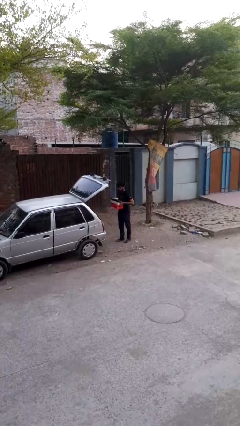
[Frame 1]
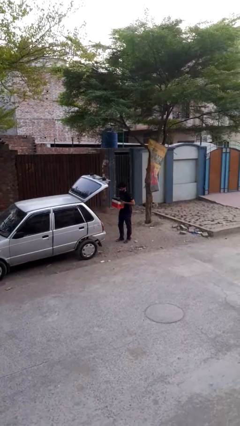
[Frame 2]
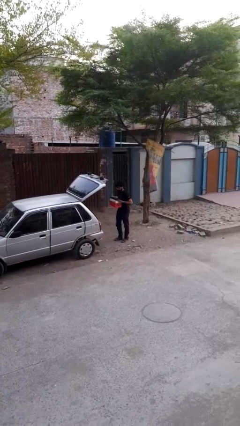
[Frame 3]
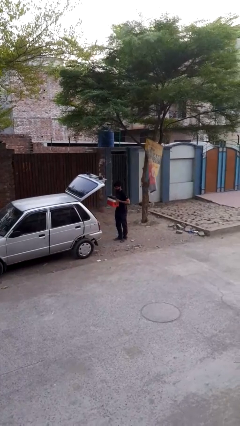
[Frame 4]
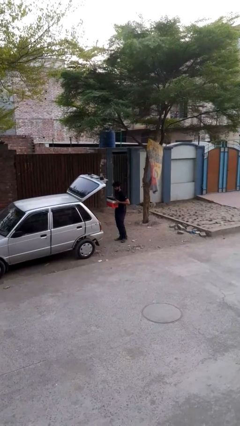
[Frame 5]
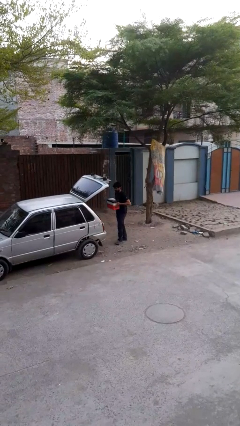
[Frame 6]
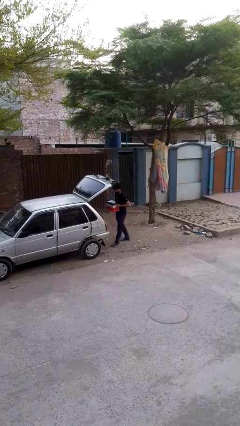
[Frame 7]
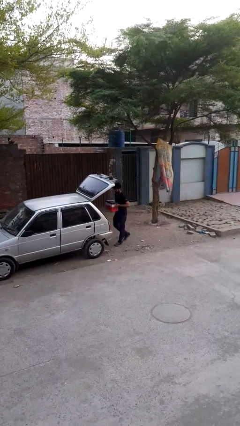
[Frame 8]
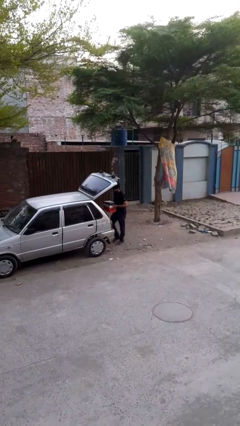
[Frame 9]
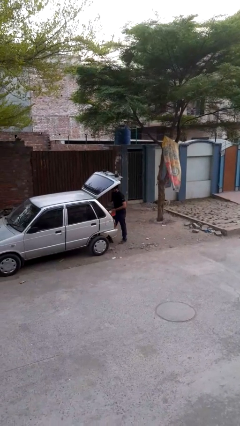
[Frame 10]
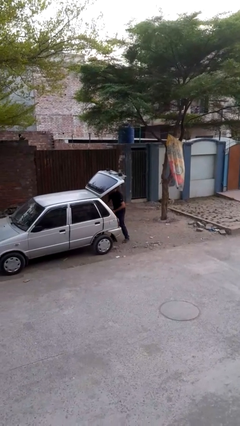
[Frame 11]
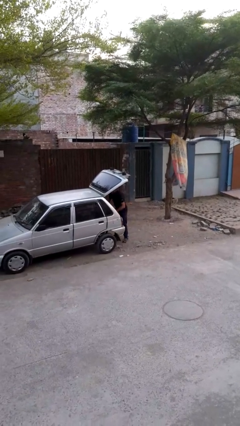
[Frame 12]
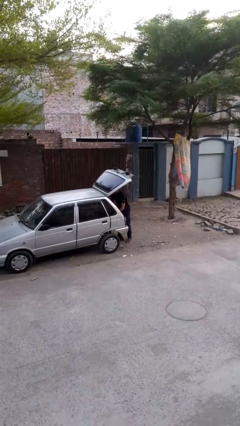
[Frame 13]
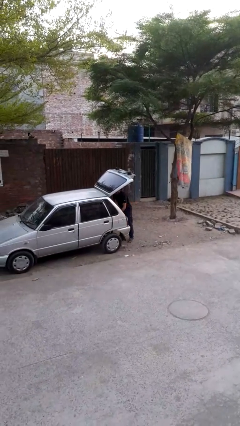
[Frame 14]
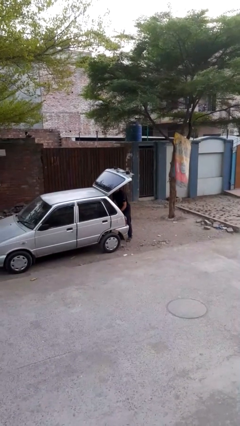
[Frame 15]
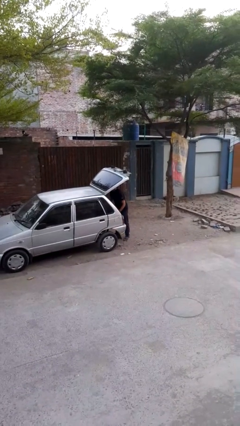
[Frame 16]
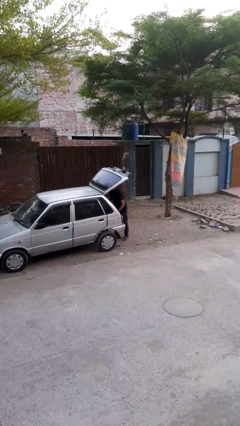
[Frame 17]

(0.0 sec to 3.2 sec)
person loads car

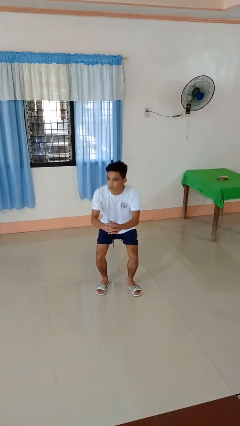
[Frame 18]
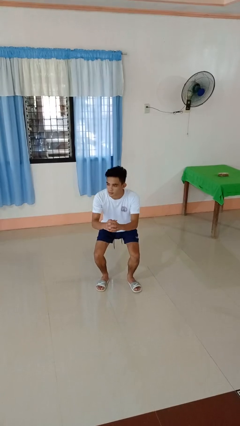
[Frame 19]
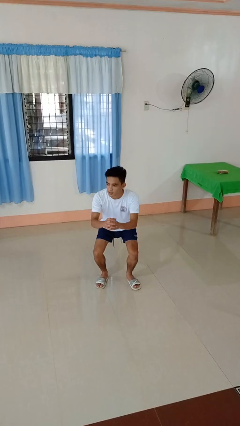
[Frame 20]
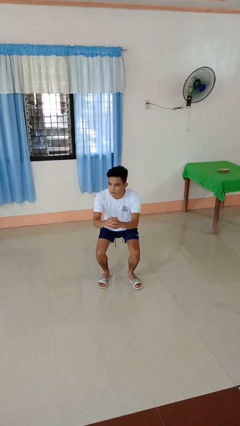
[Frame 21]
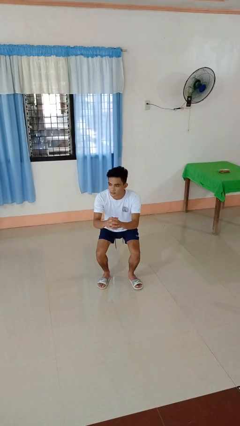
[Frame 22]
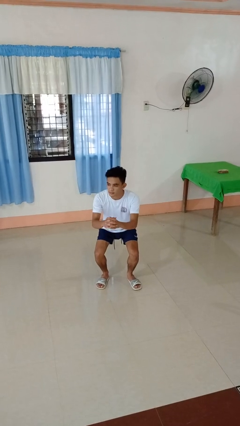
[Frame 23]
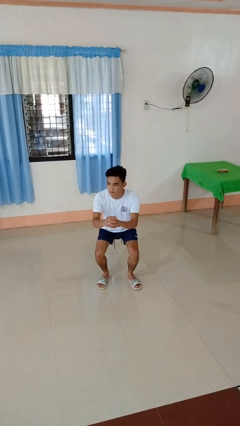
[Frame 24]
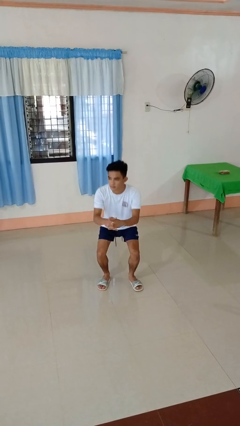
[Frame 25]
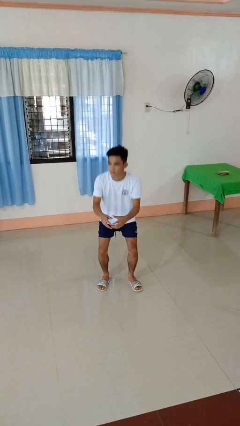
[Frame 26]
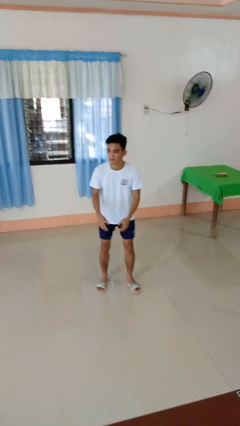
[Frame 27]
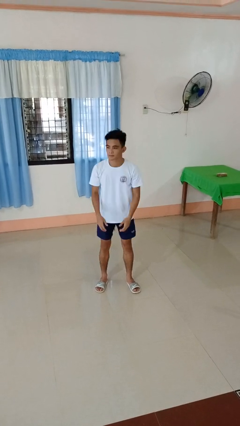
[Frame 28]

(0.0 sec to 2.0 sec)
person squats

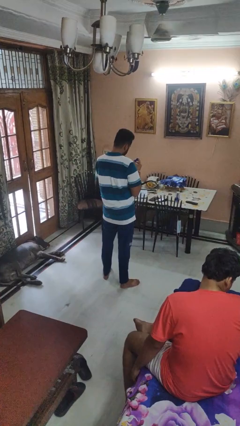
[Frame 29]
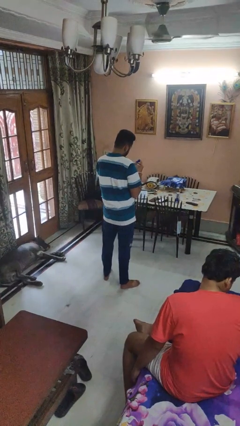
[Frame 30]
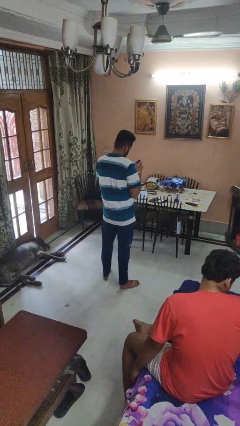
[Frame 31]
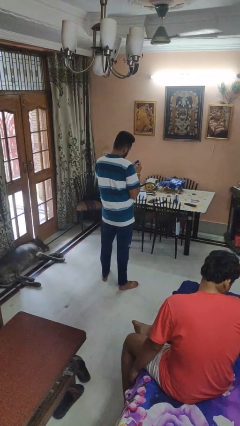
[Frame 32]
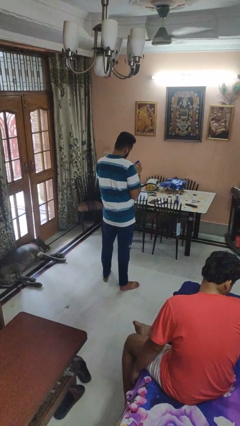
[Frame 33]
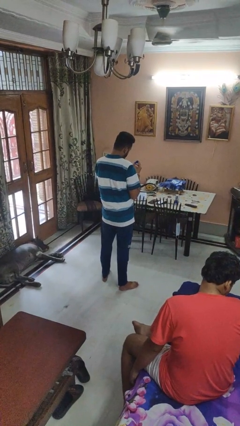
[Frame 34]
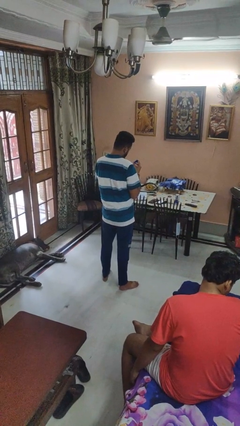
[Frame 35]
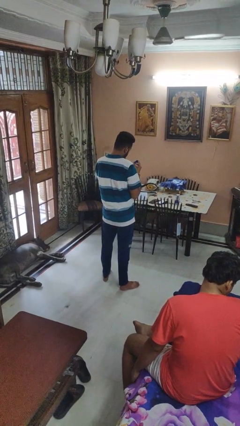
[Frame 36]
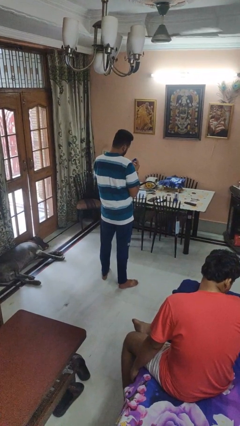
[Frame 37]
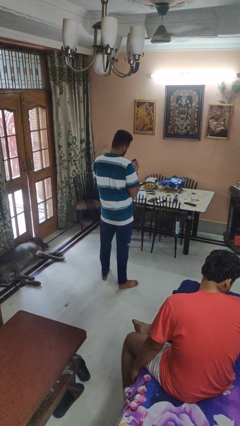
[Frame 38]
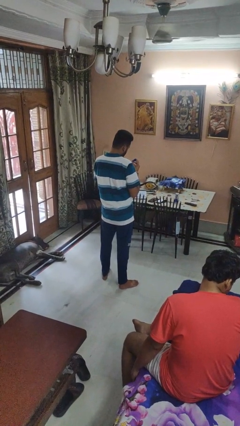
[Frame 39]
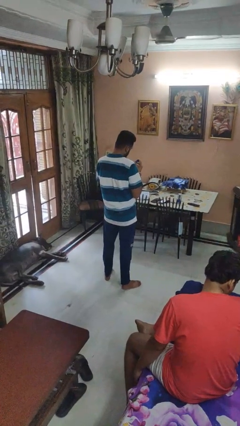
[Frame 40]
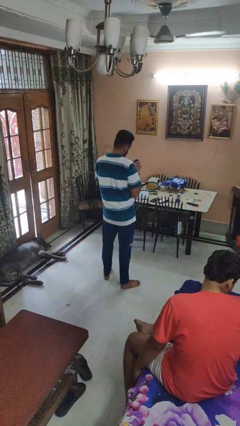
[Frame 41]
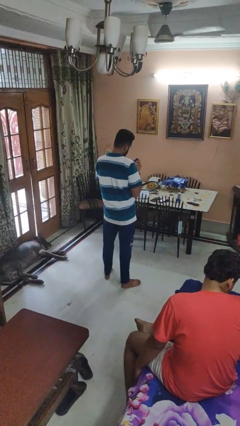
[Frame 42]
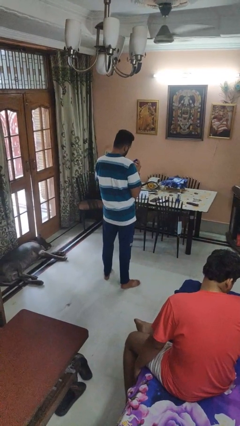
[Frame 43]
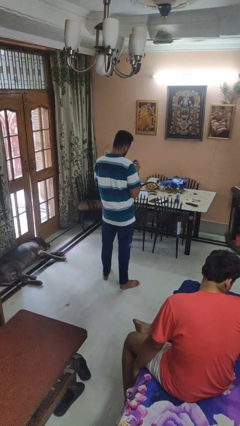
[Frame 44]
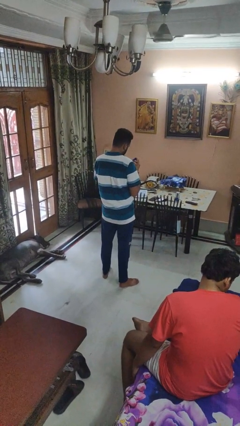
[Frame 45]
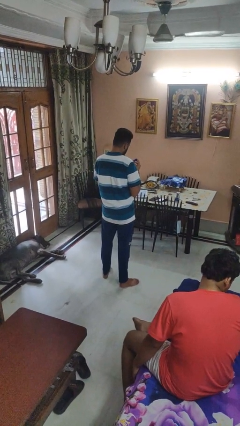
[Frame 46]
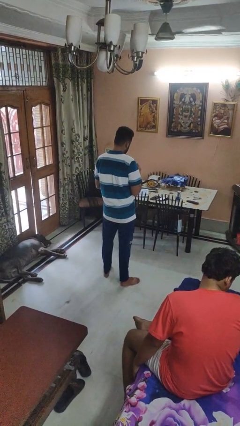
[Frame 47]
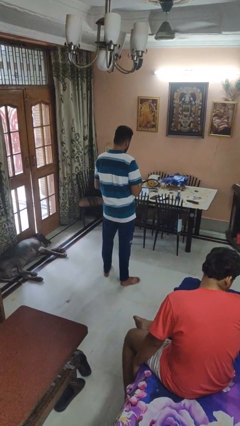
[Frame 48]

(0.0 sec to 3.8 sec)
person clips fingernails

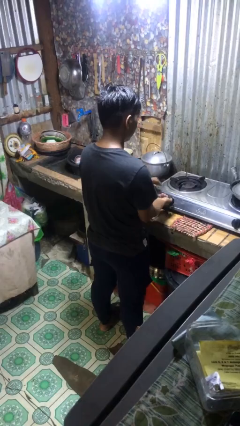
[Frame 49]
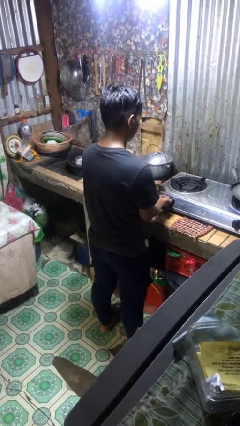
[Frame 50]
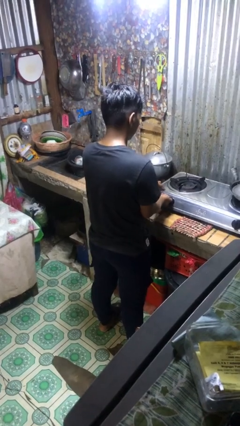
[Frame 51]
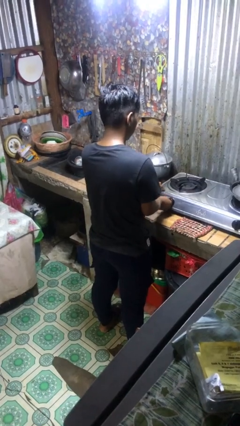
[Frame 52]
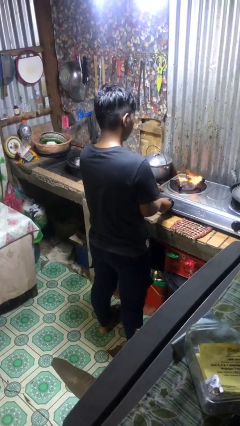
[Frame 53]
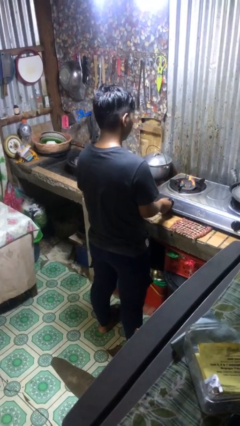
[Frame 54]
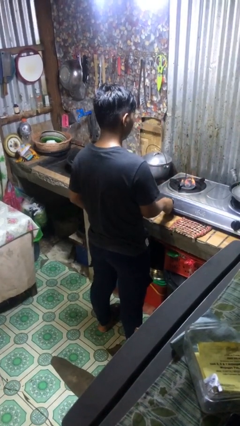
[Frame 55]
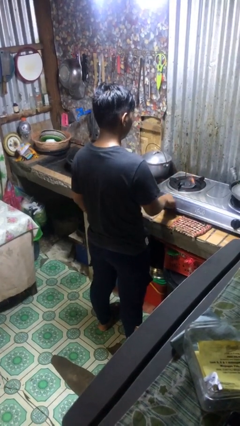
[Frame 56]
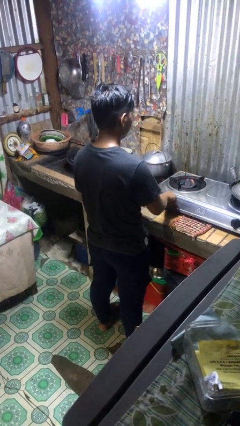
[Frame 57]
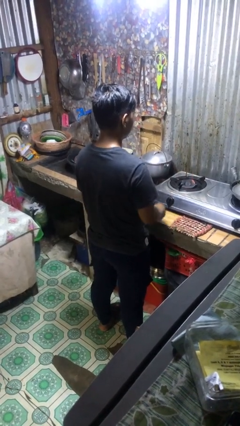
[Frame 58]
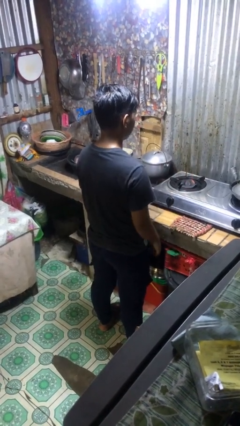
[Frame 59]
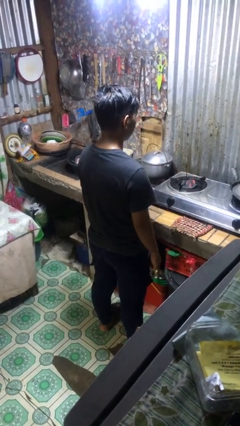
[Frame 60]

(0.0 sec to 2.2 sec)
person turns on stovetop

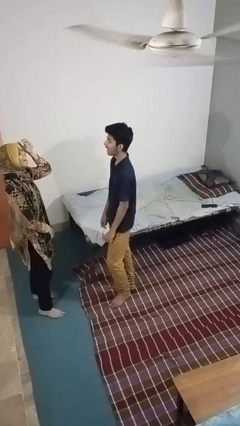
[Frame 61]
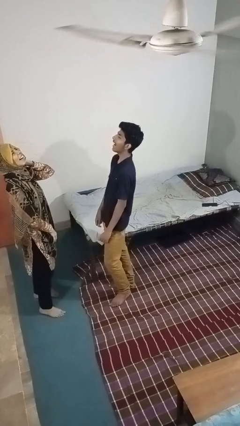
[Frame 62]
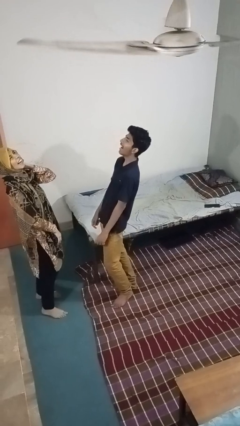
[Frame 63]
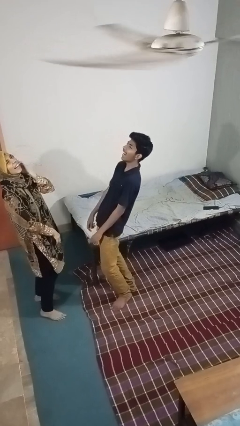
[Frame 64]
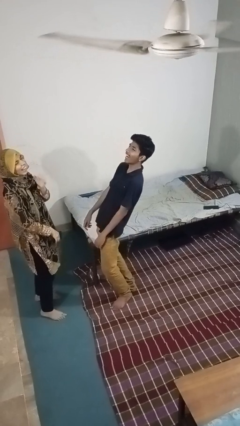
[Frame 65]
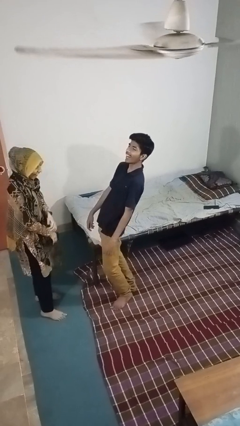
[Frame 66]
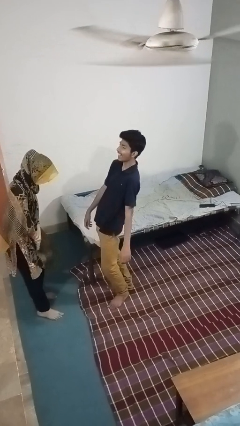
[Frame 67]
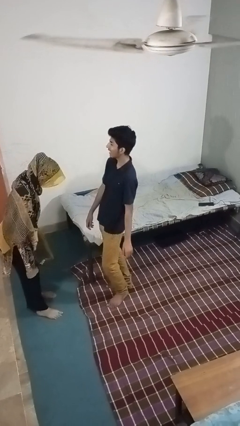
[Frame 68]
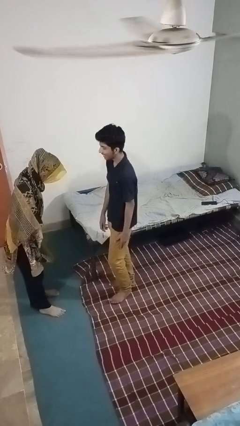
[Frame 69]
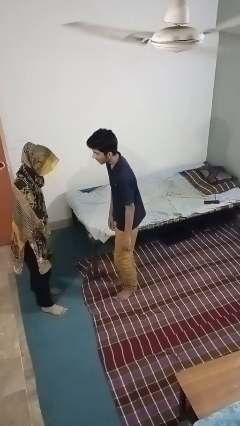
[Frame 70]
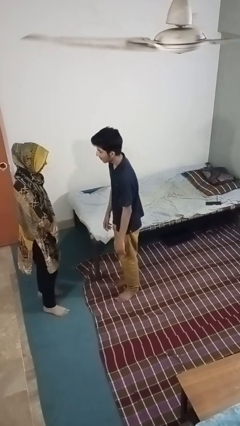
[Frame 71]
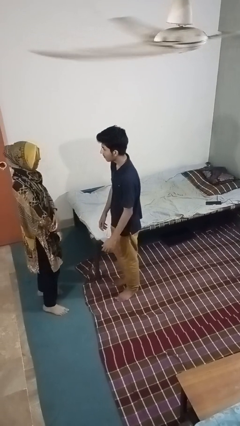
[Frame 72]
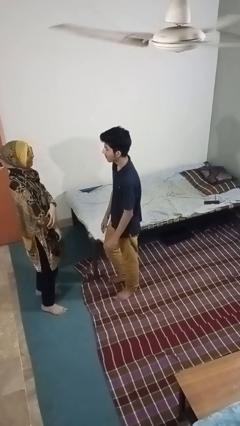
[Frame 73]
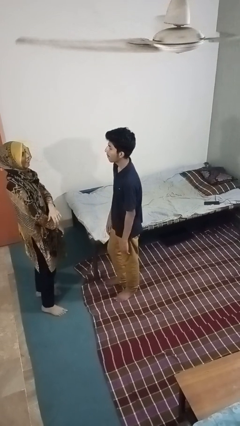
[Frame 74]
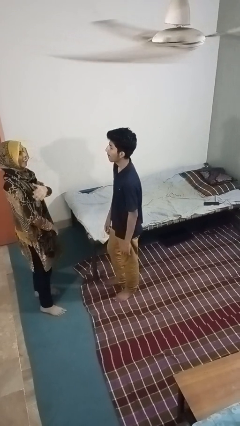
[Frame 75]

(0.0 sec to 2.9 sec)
person laughs with person

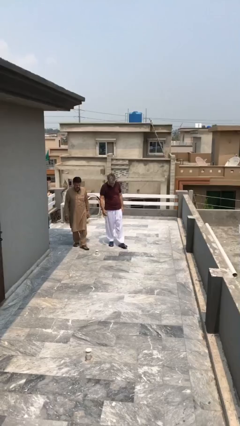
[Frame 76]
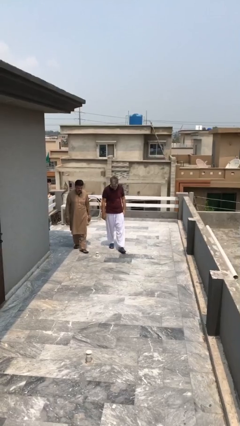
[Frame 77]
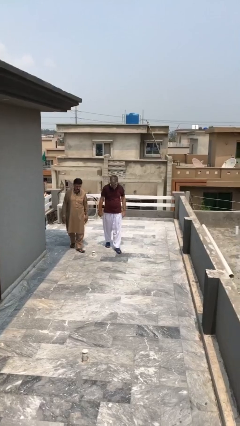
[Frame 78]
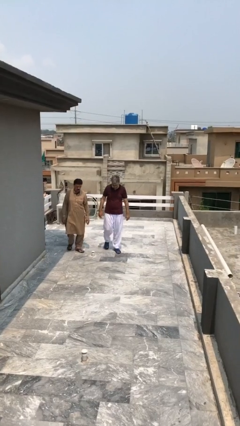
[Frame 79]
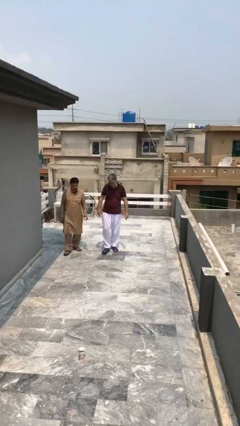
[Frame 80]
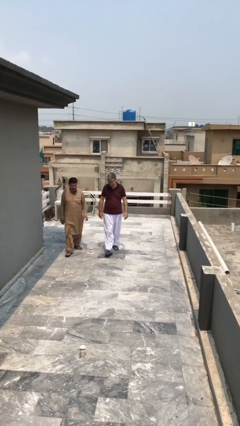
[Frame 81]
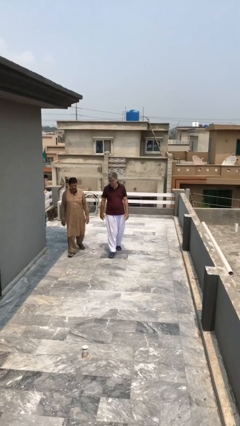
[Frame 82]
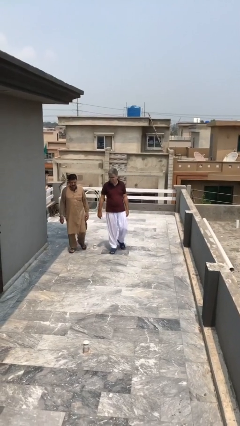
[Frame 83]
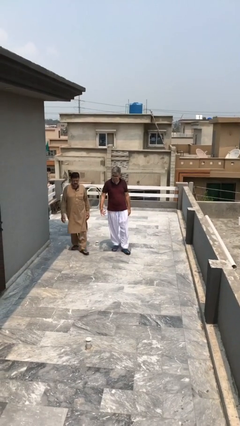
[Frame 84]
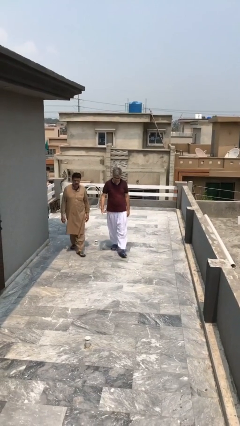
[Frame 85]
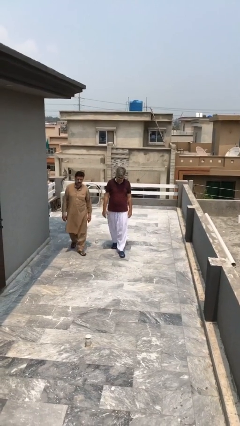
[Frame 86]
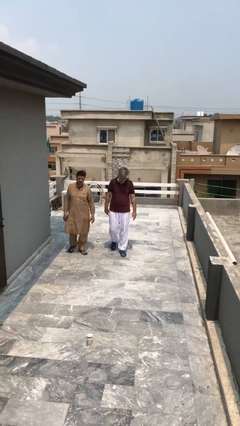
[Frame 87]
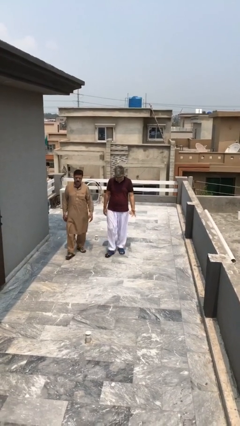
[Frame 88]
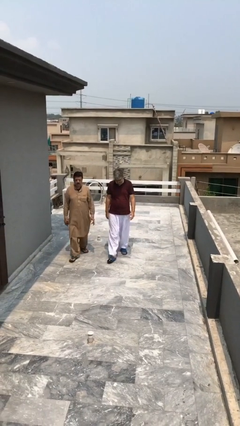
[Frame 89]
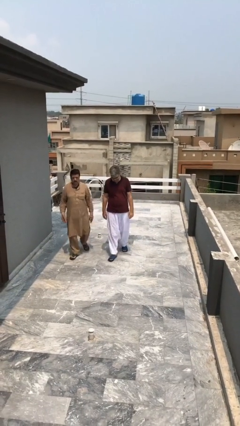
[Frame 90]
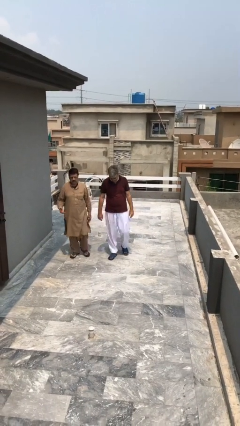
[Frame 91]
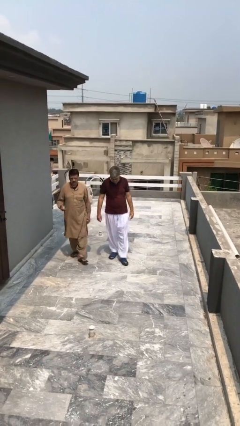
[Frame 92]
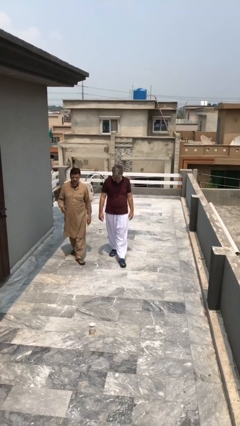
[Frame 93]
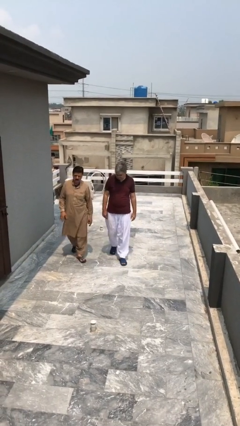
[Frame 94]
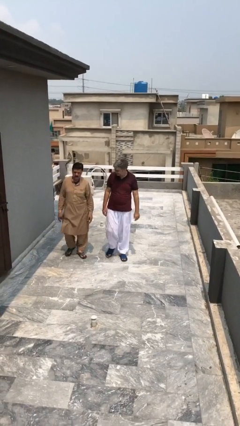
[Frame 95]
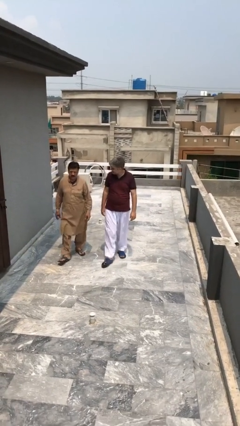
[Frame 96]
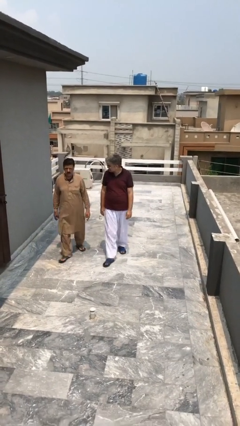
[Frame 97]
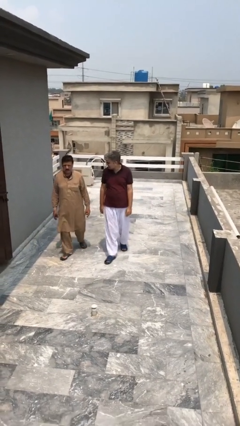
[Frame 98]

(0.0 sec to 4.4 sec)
person talks to person
